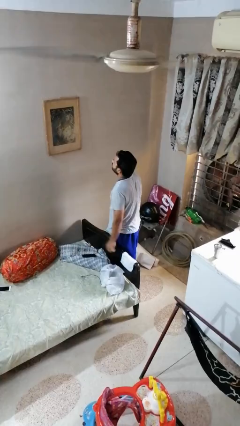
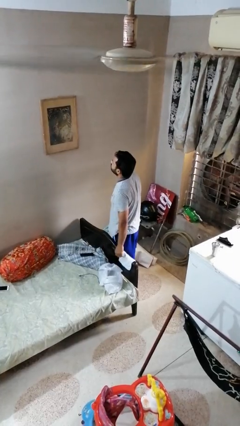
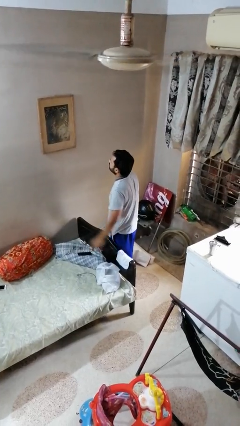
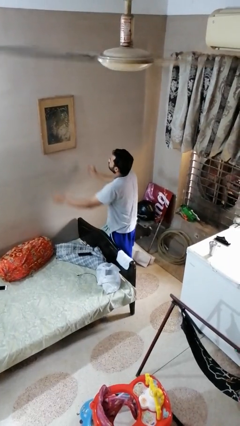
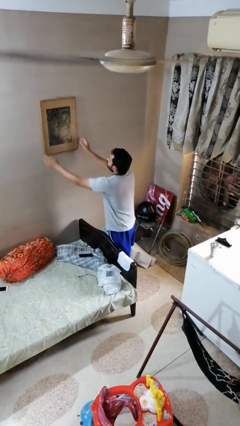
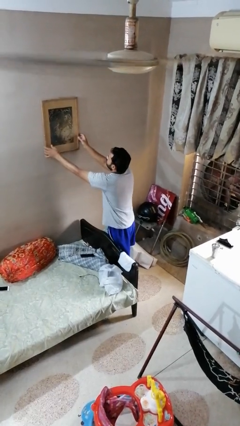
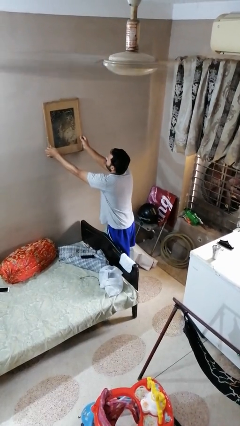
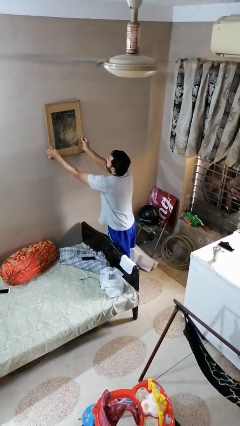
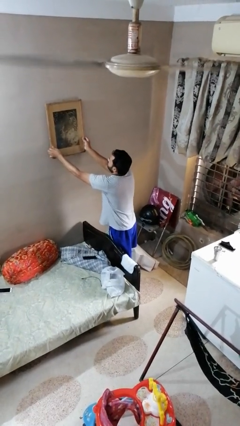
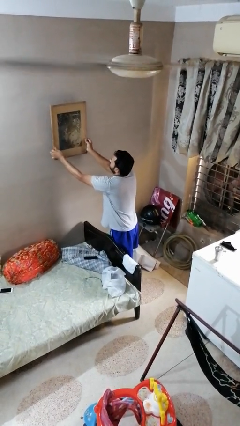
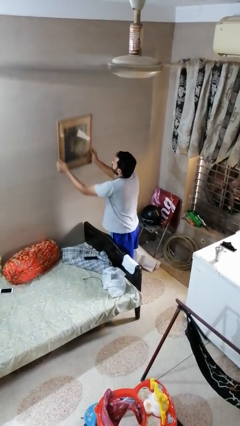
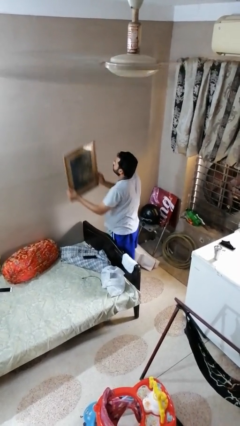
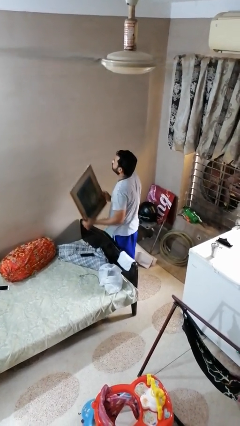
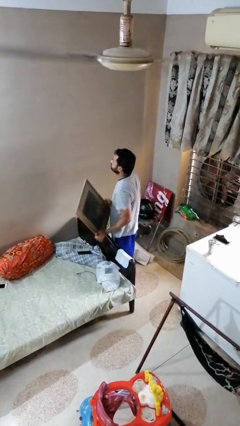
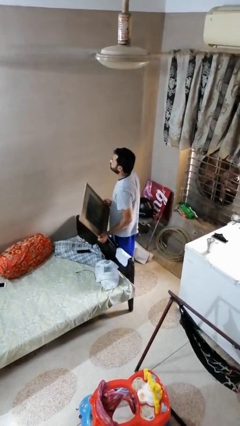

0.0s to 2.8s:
person takes down picture frame

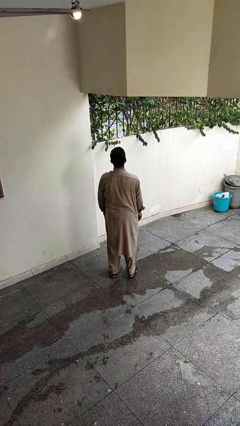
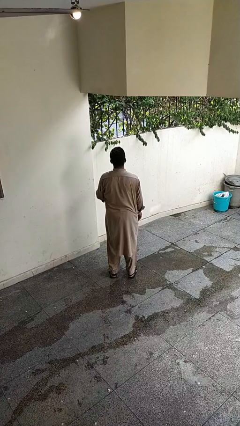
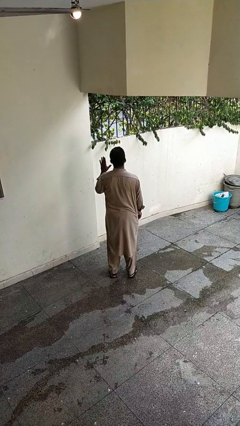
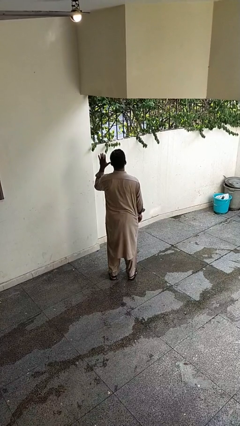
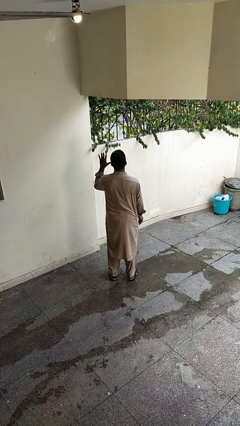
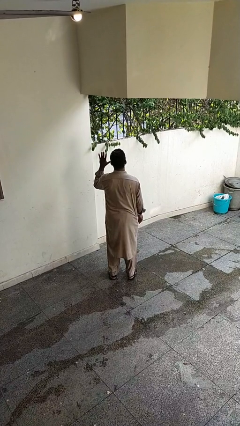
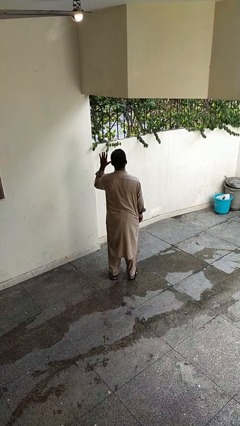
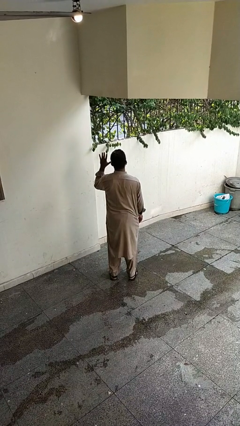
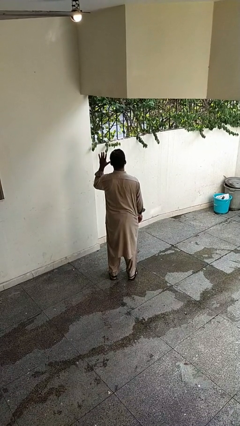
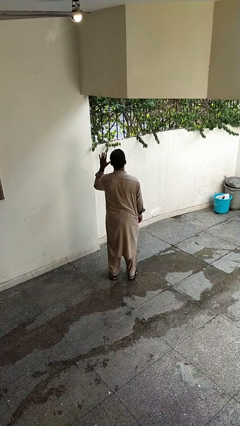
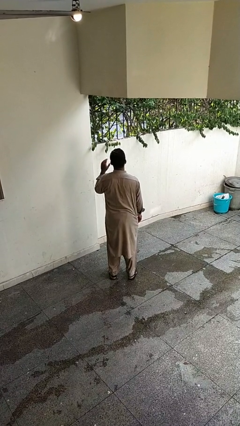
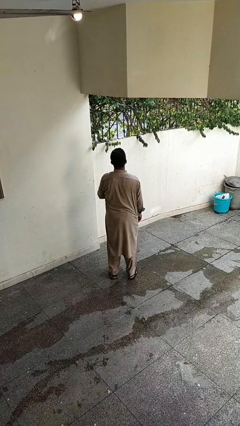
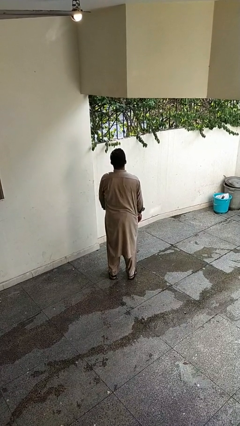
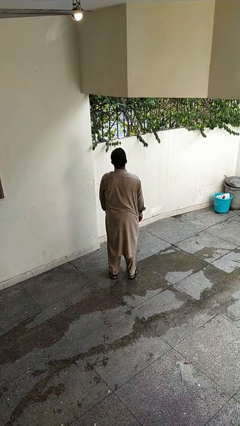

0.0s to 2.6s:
person gestures number five

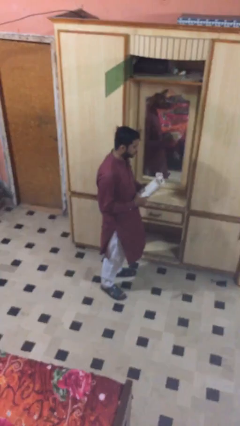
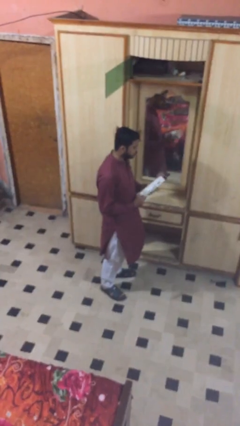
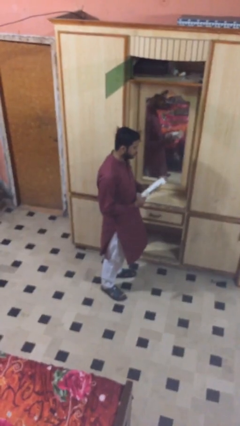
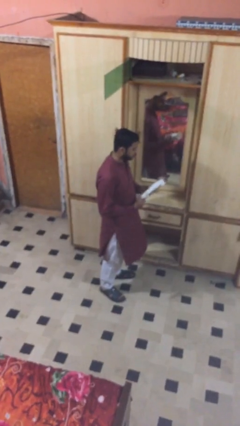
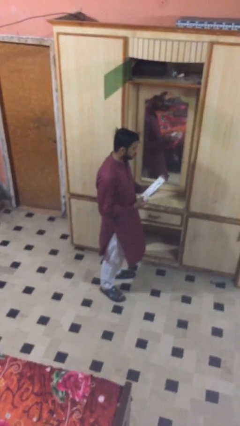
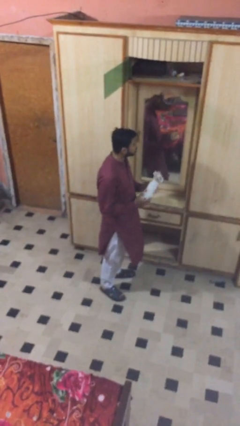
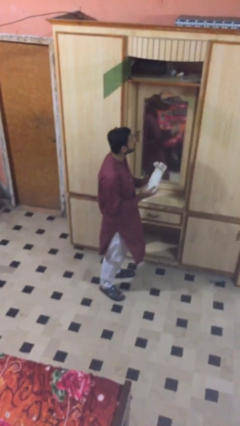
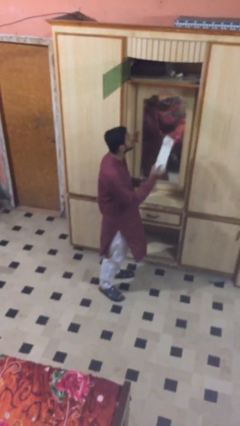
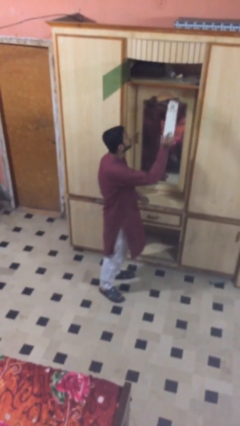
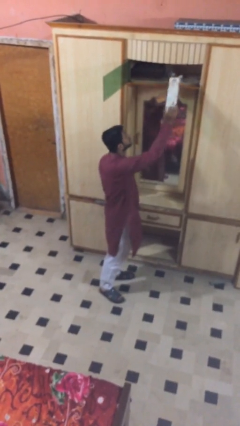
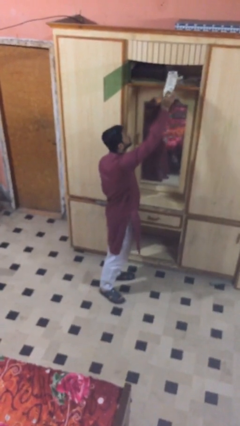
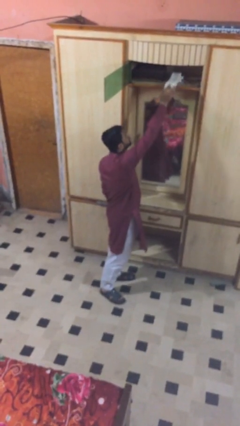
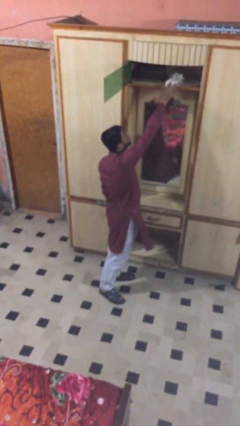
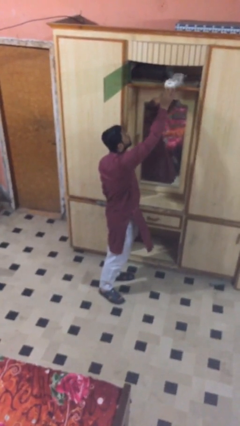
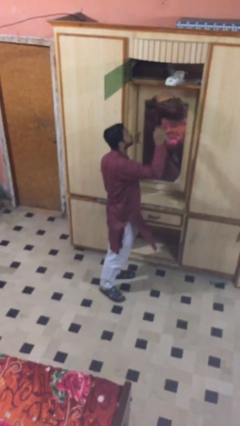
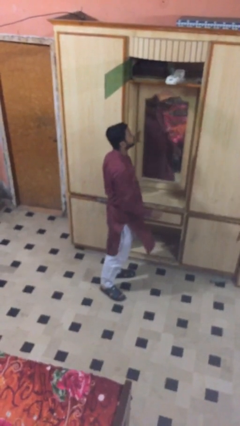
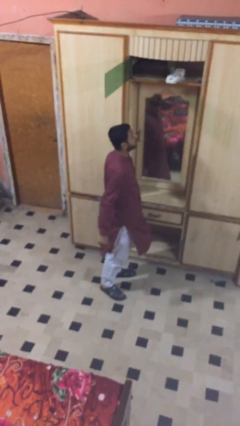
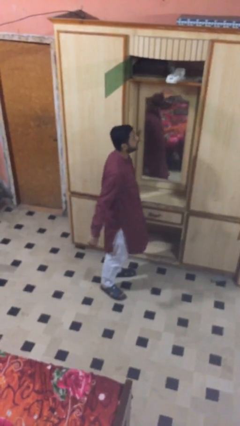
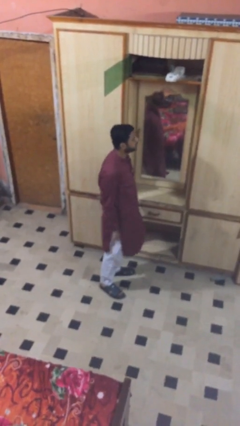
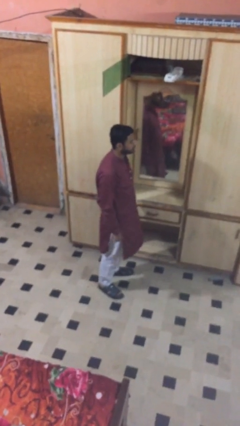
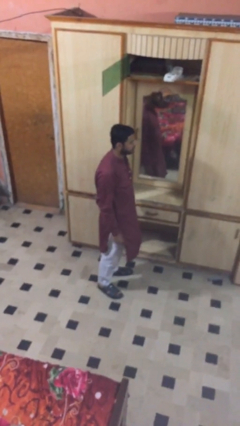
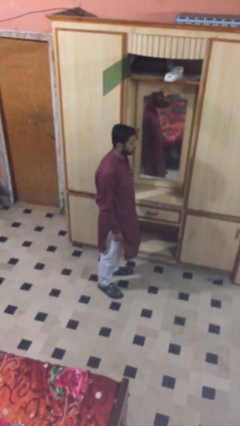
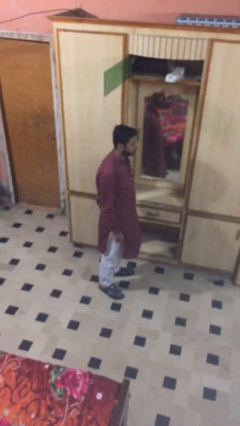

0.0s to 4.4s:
person puts down object on shelf

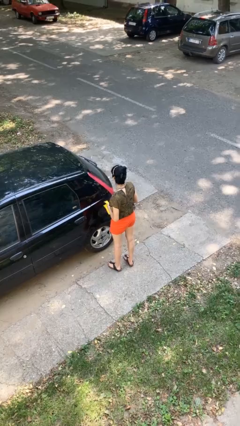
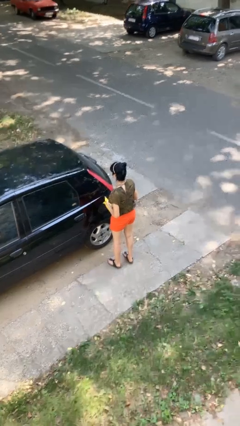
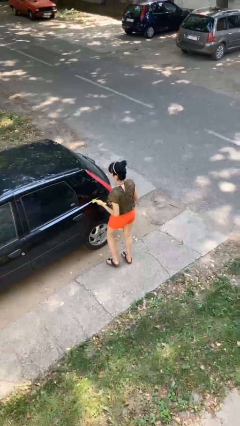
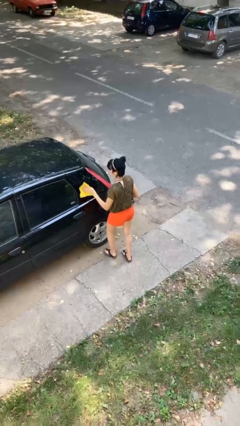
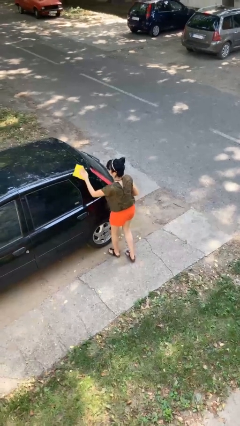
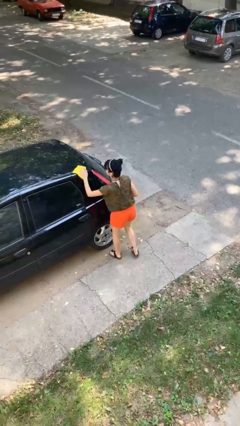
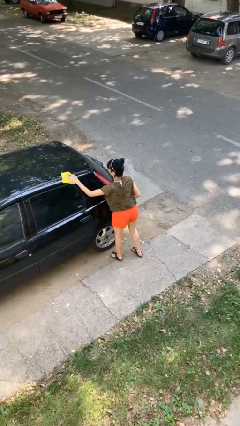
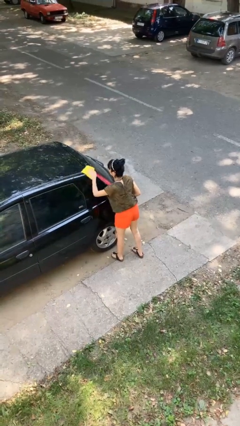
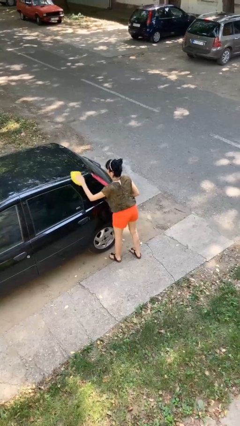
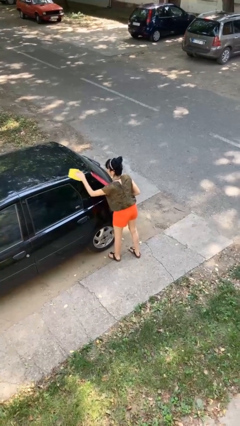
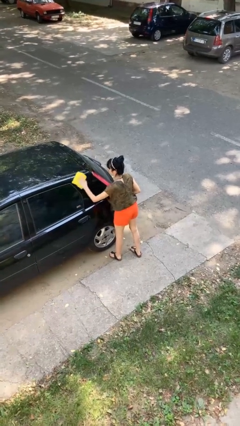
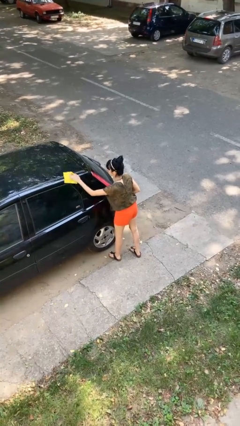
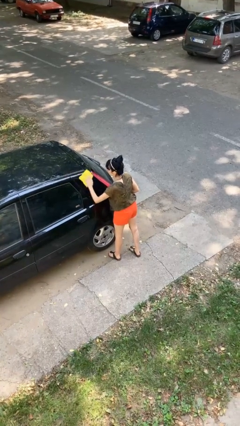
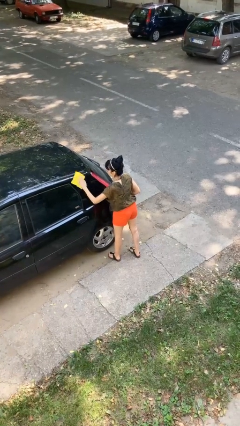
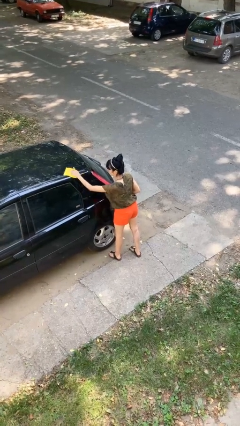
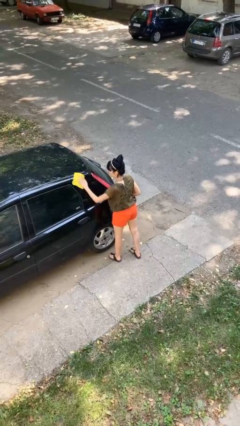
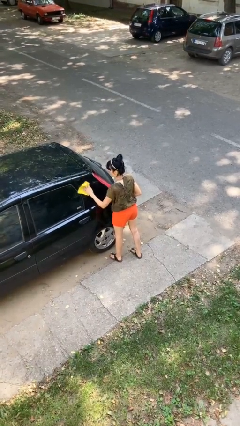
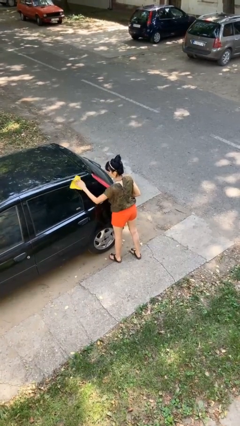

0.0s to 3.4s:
person polishes car with rag

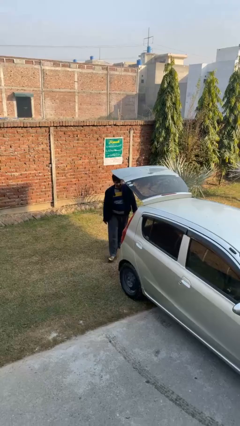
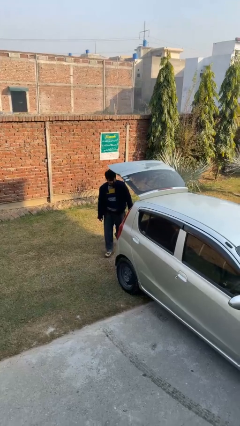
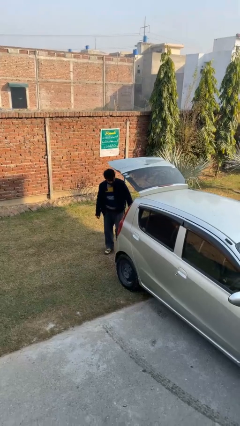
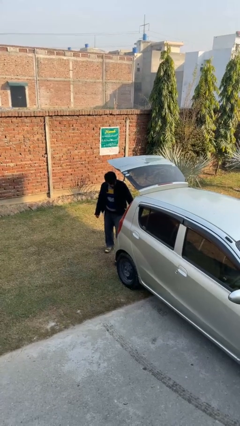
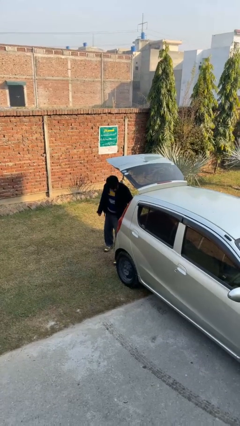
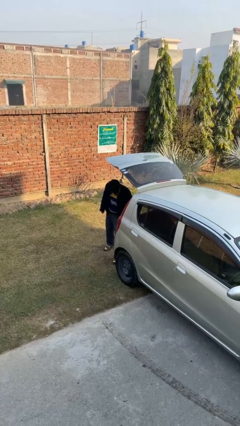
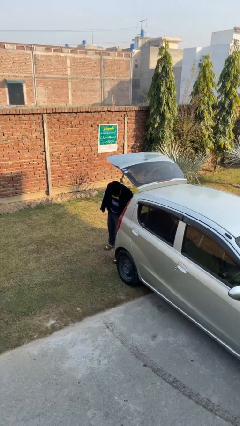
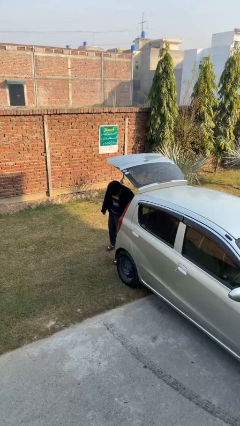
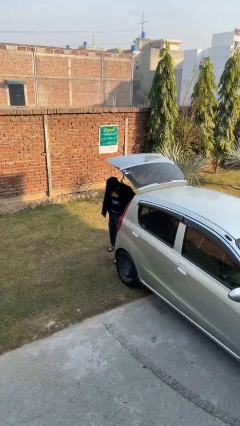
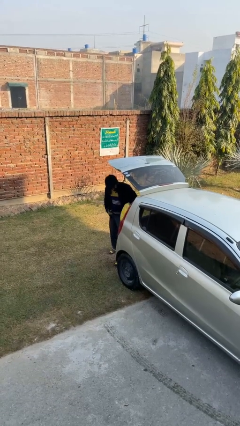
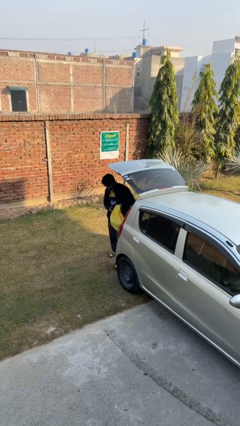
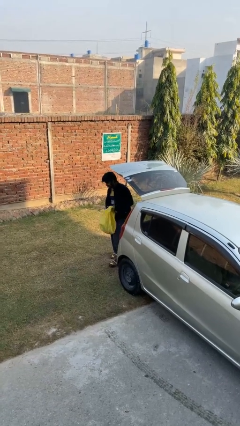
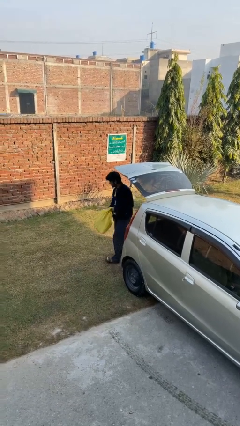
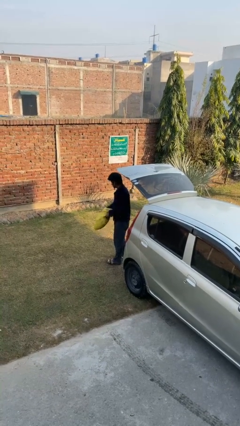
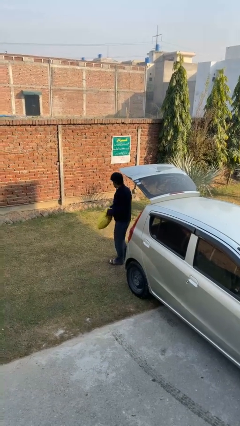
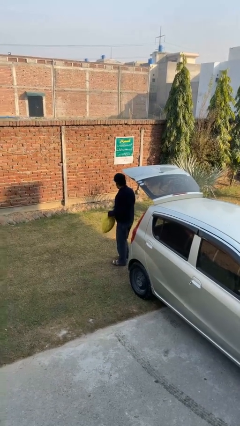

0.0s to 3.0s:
person unloads car

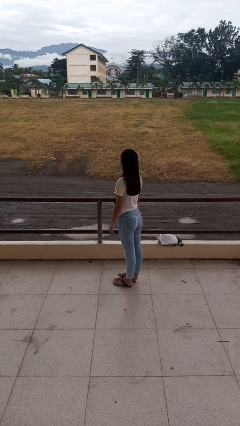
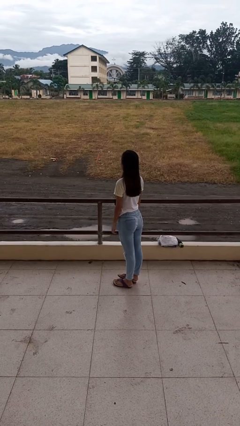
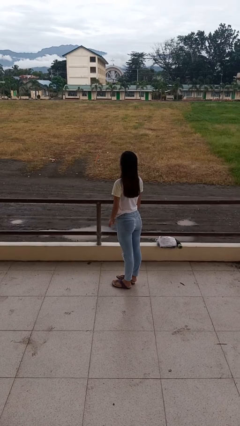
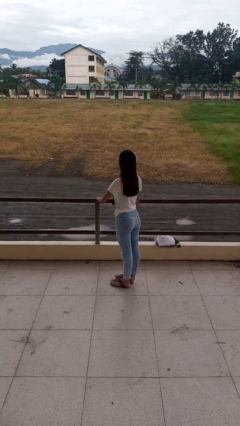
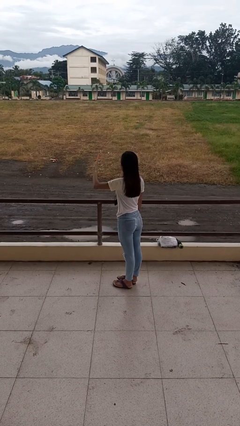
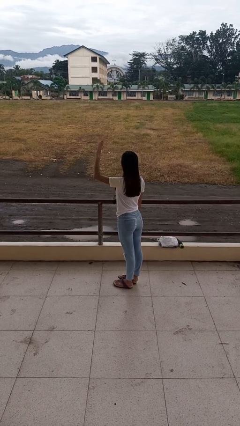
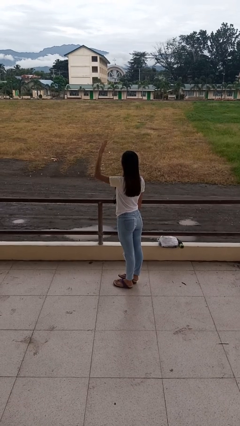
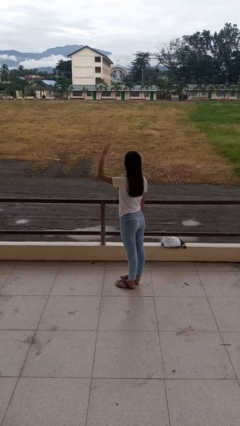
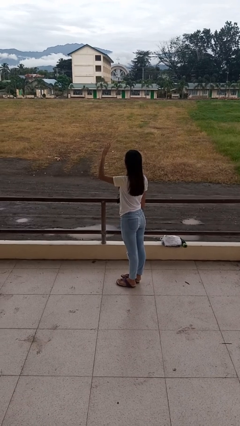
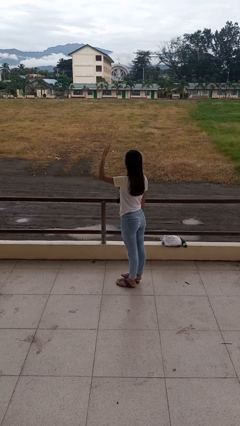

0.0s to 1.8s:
person gestures swipe up
